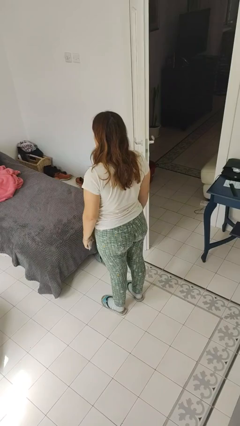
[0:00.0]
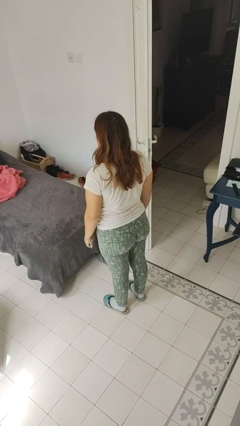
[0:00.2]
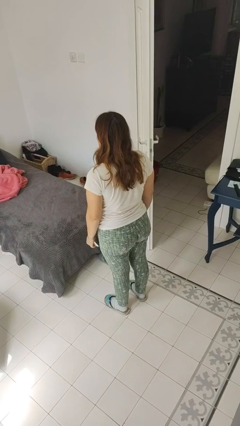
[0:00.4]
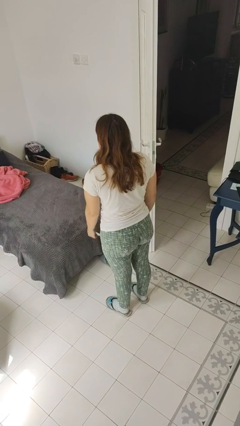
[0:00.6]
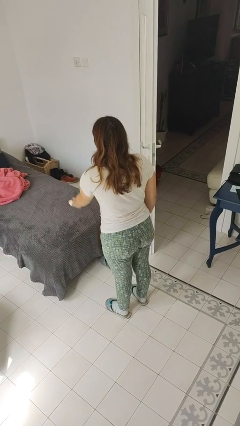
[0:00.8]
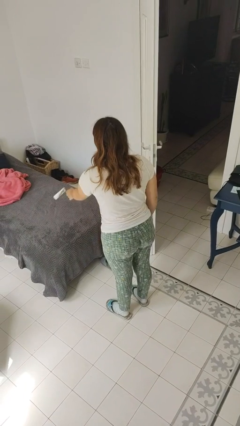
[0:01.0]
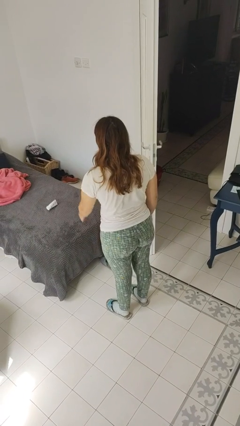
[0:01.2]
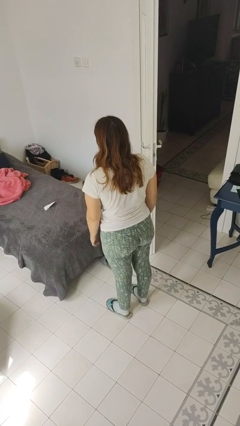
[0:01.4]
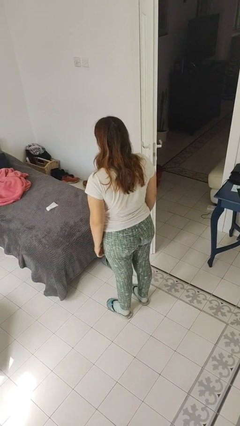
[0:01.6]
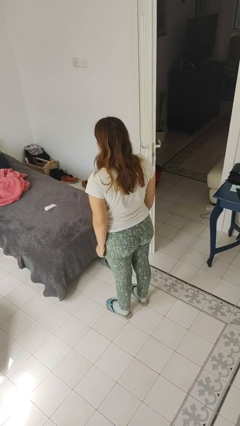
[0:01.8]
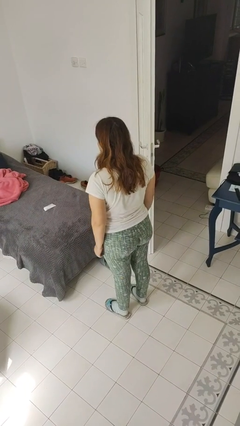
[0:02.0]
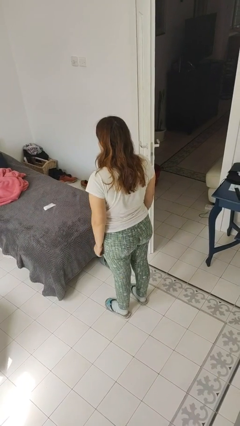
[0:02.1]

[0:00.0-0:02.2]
person throws object on bed

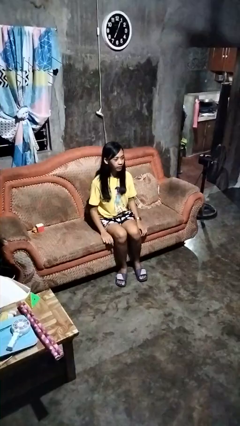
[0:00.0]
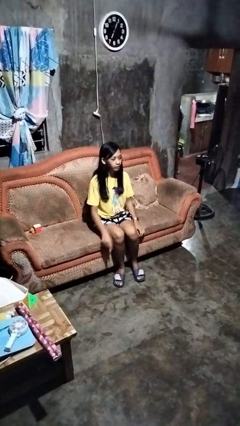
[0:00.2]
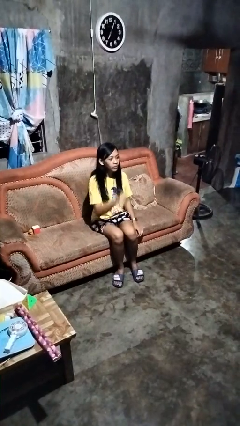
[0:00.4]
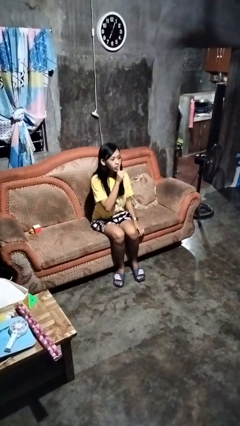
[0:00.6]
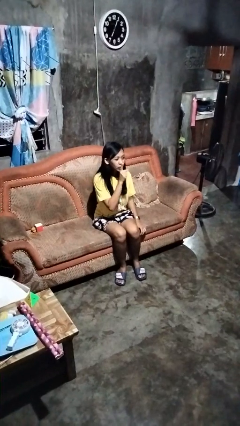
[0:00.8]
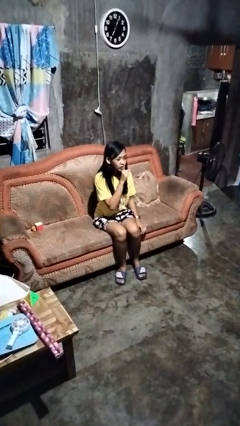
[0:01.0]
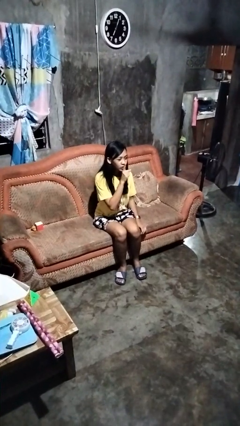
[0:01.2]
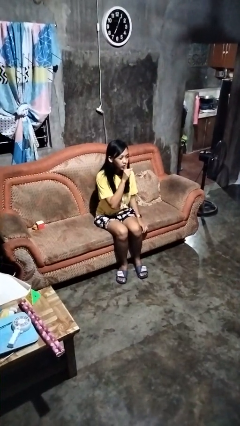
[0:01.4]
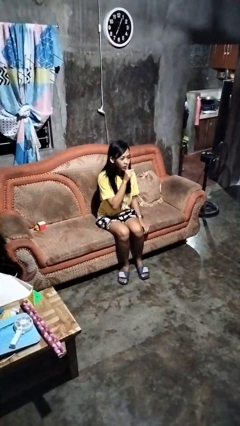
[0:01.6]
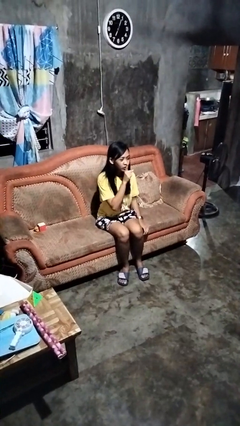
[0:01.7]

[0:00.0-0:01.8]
person gestures be quiet

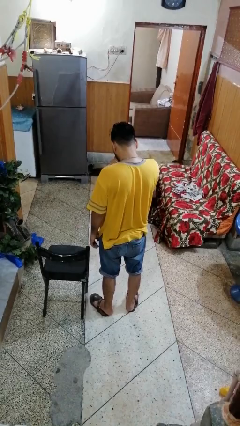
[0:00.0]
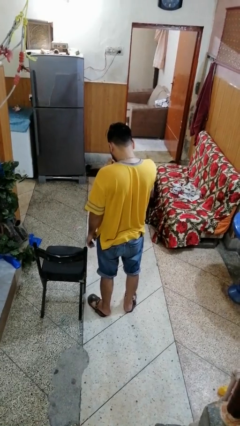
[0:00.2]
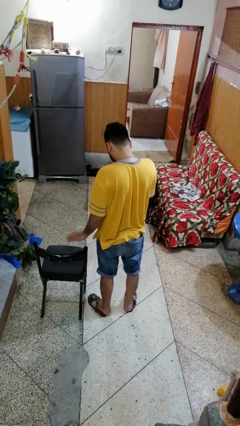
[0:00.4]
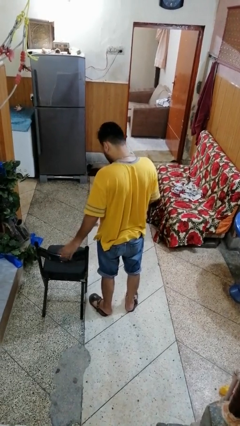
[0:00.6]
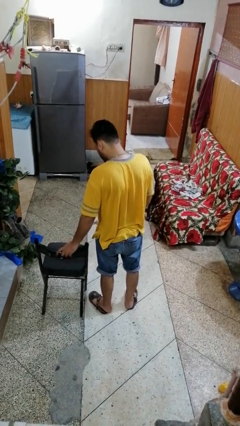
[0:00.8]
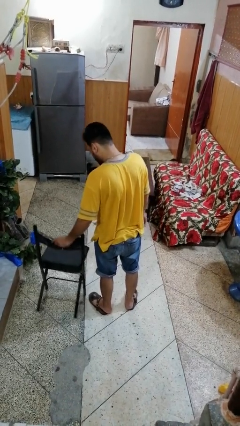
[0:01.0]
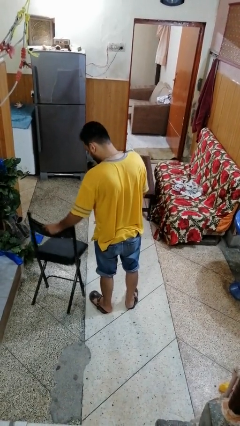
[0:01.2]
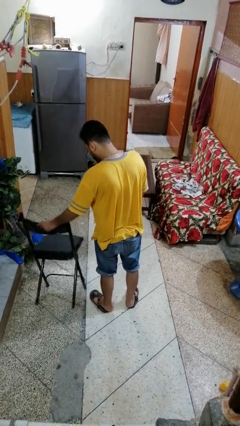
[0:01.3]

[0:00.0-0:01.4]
person knocks over furniture

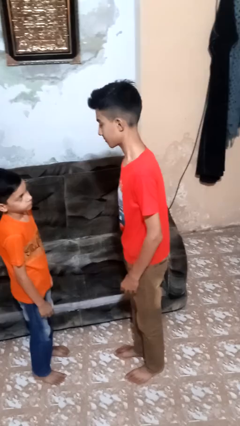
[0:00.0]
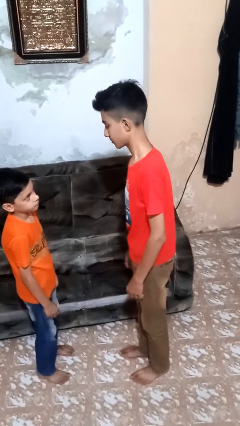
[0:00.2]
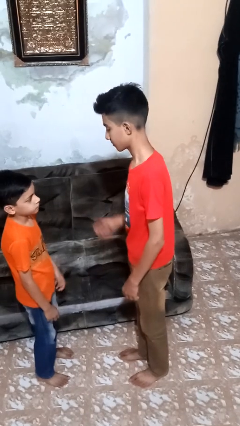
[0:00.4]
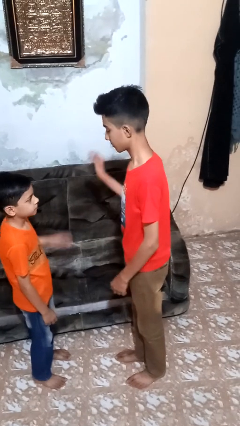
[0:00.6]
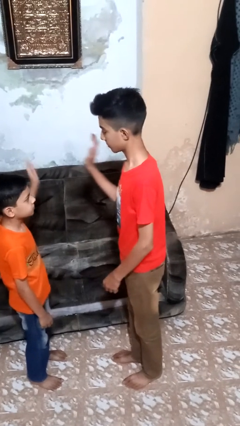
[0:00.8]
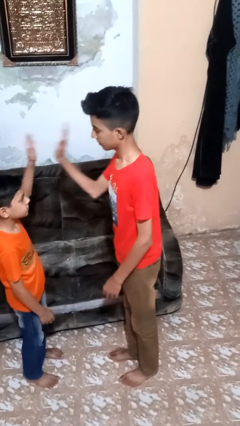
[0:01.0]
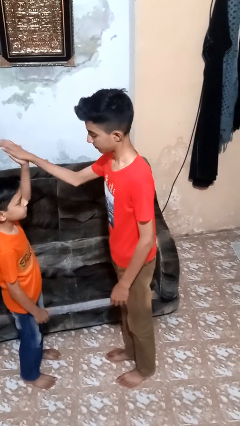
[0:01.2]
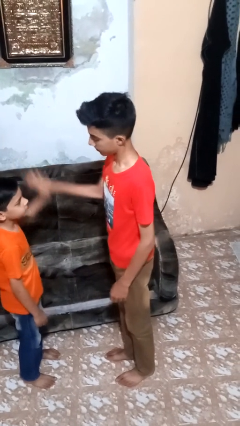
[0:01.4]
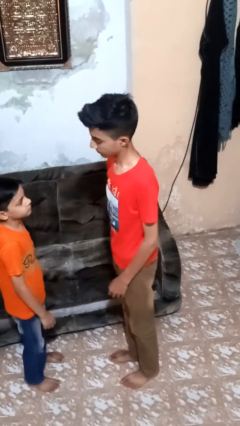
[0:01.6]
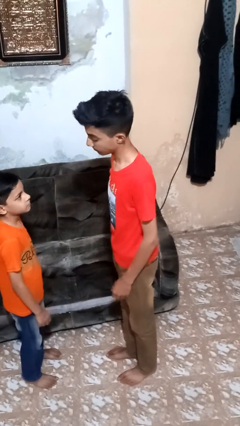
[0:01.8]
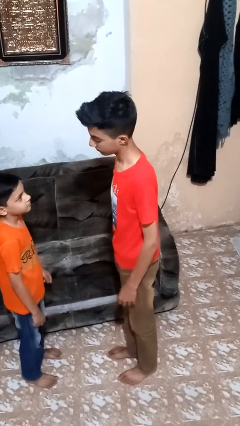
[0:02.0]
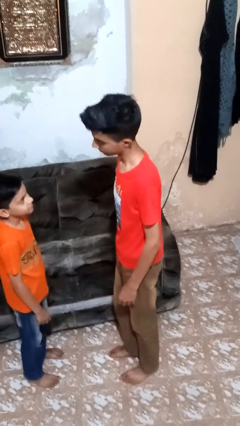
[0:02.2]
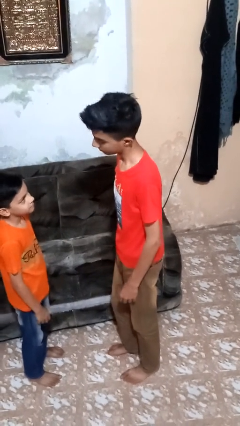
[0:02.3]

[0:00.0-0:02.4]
person highfives hand

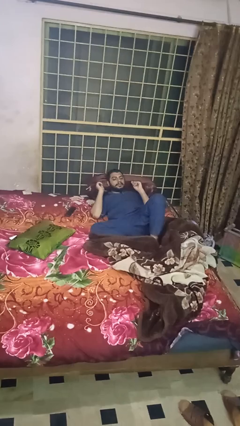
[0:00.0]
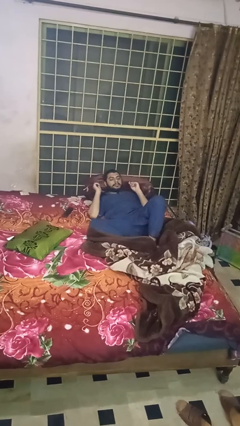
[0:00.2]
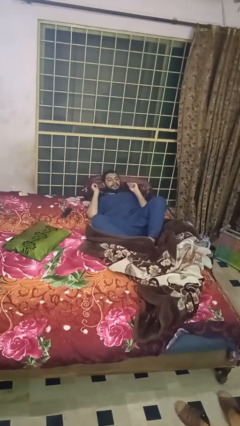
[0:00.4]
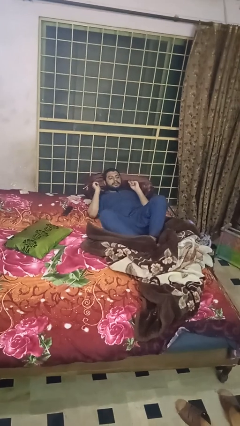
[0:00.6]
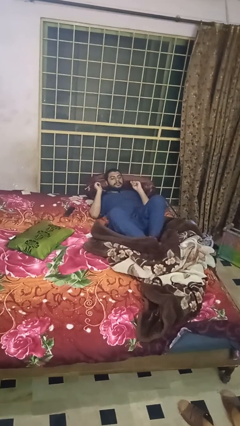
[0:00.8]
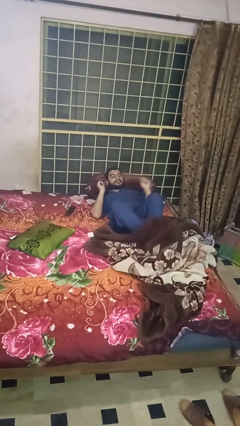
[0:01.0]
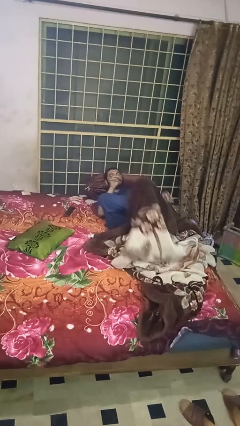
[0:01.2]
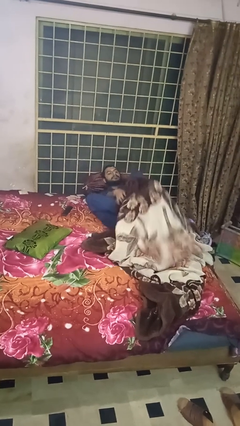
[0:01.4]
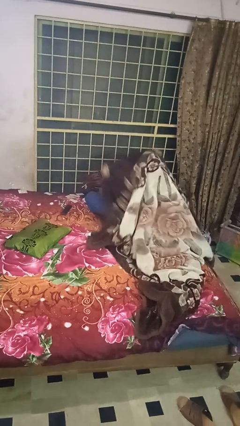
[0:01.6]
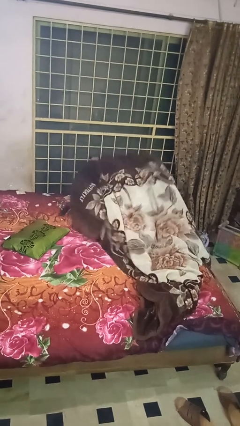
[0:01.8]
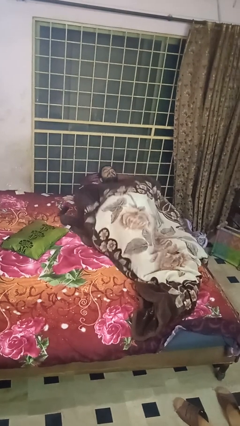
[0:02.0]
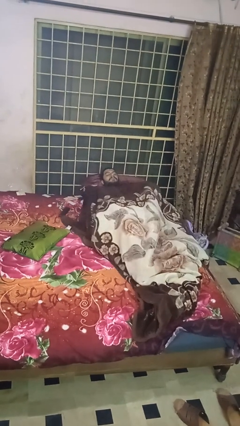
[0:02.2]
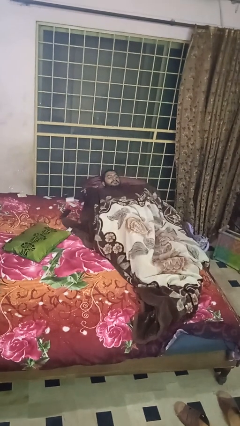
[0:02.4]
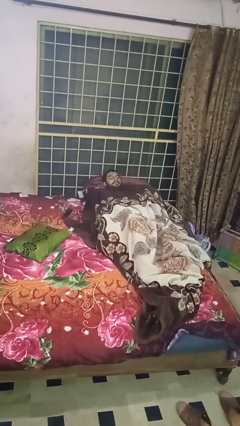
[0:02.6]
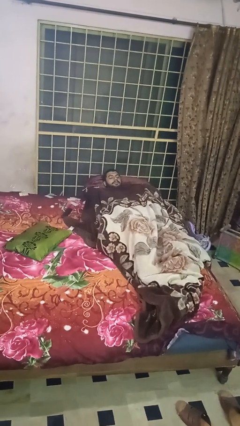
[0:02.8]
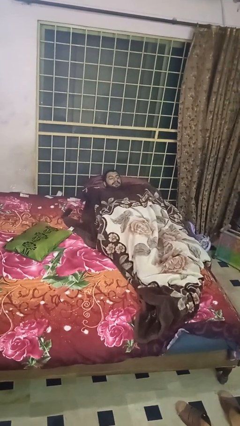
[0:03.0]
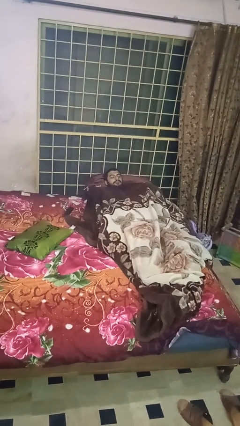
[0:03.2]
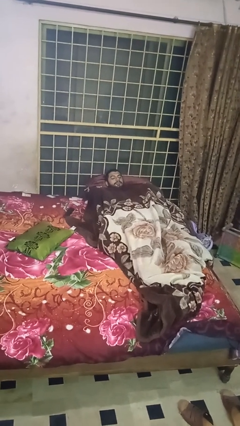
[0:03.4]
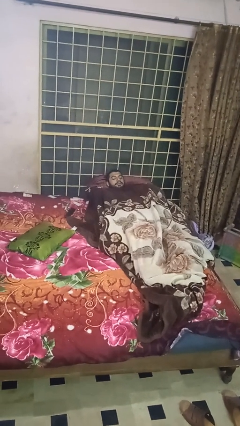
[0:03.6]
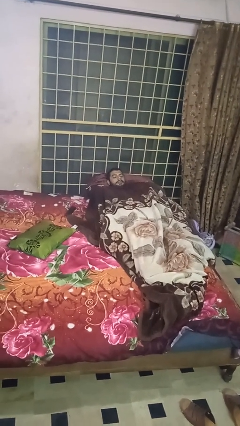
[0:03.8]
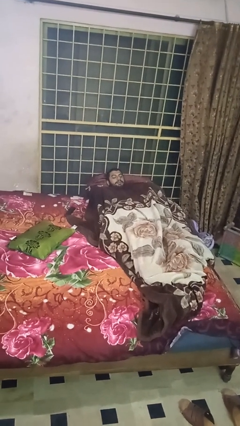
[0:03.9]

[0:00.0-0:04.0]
person covers with blanket

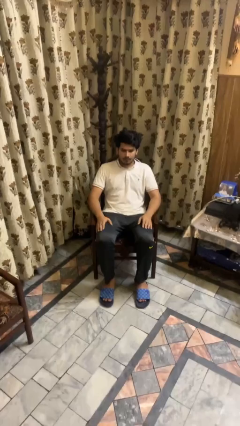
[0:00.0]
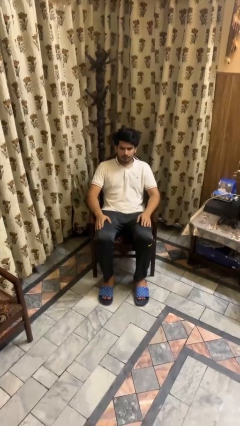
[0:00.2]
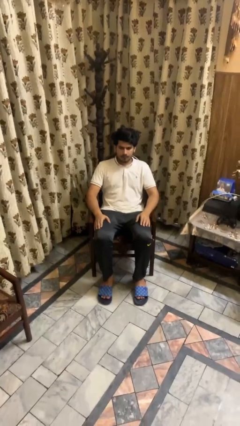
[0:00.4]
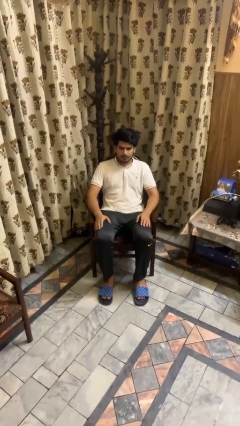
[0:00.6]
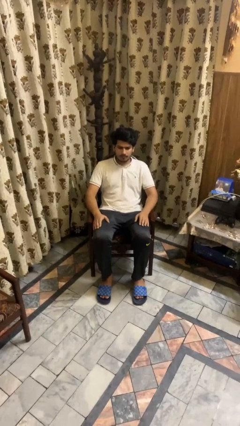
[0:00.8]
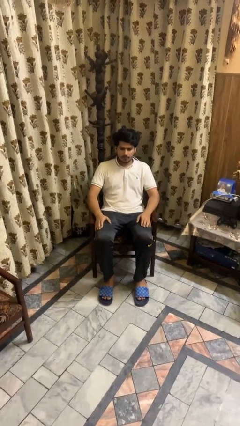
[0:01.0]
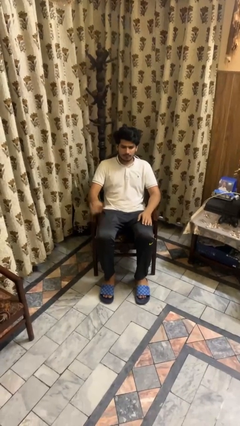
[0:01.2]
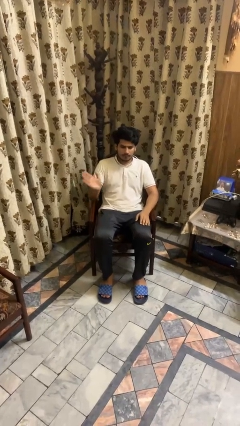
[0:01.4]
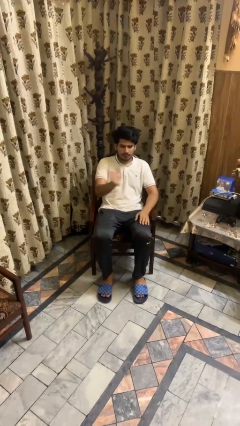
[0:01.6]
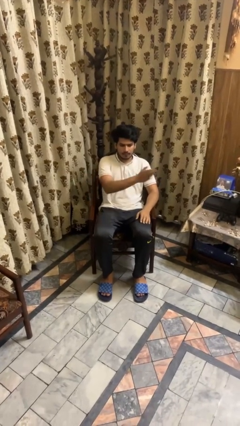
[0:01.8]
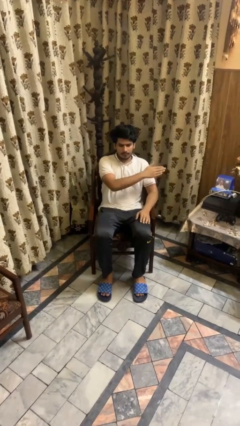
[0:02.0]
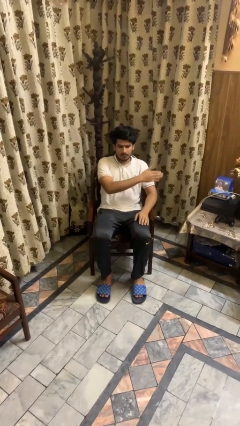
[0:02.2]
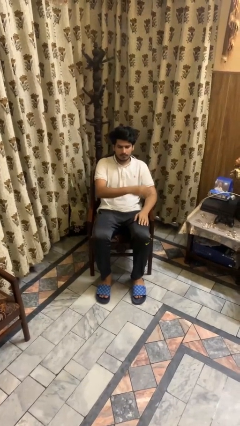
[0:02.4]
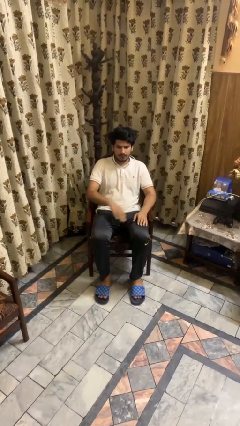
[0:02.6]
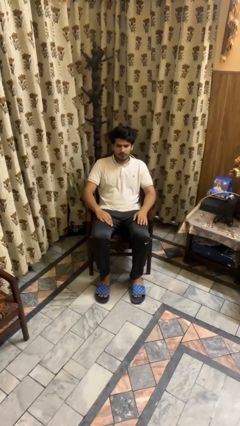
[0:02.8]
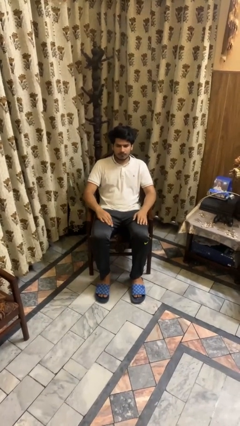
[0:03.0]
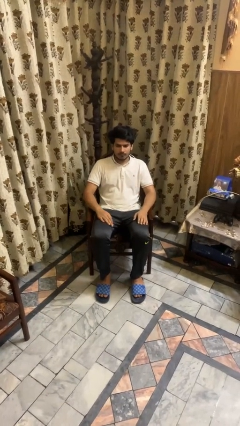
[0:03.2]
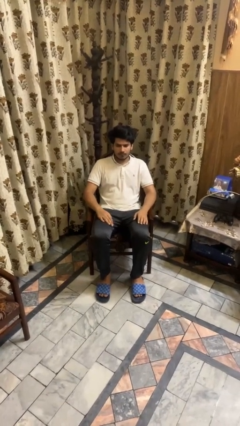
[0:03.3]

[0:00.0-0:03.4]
person gestures swipe left

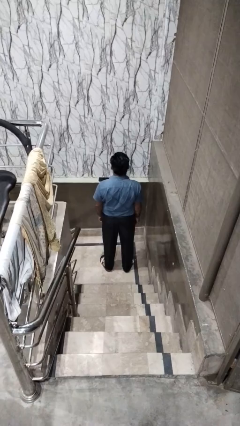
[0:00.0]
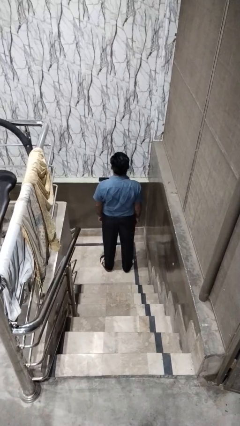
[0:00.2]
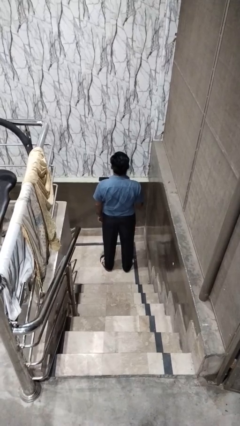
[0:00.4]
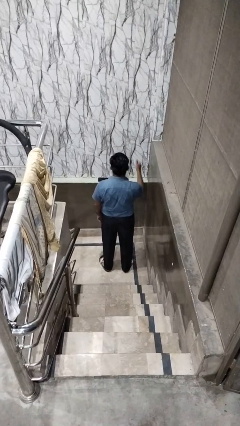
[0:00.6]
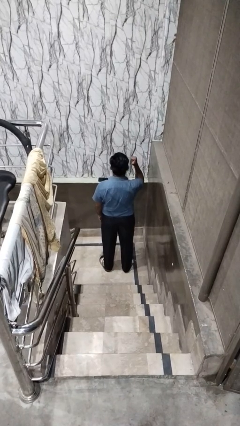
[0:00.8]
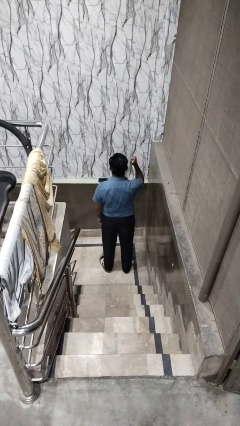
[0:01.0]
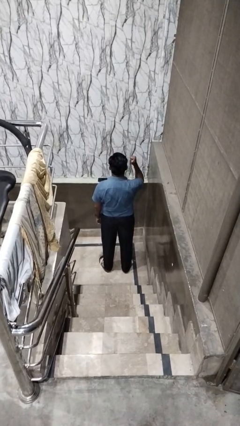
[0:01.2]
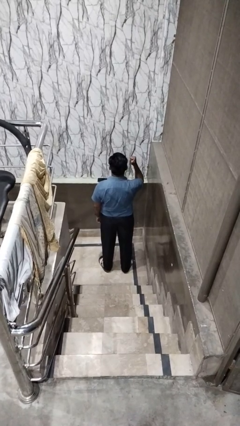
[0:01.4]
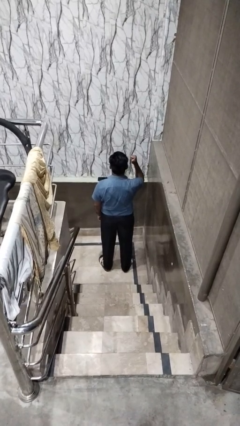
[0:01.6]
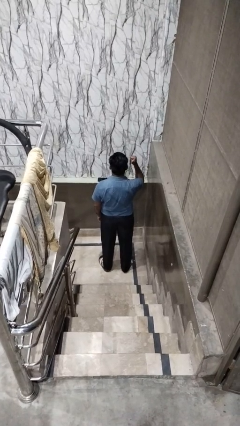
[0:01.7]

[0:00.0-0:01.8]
person gestures behind me
